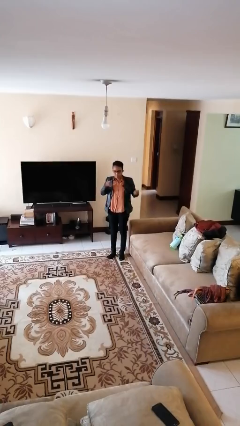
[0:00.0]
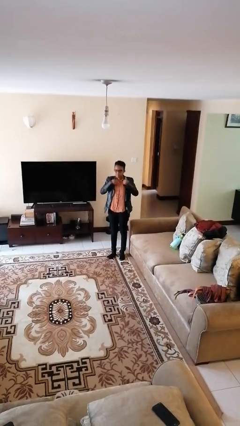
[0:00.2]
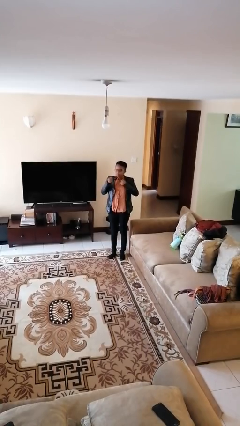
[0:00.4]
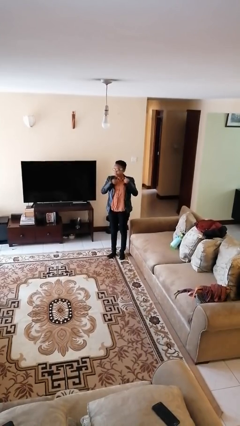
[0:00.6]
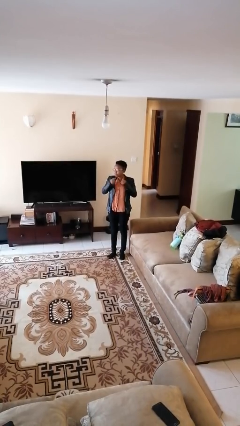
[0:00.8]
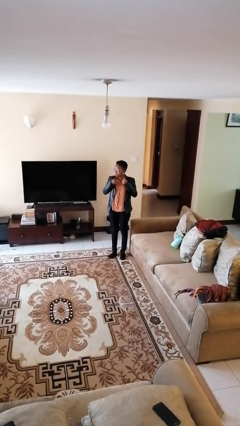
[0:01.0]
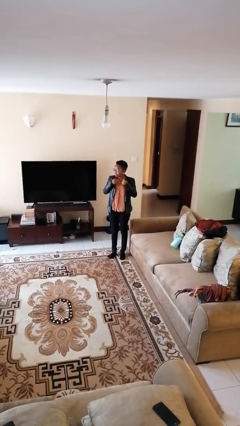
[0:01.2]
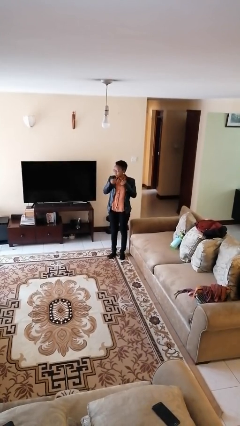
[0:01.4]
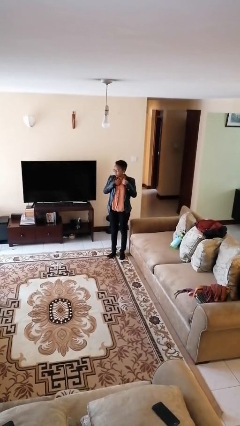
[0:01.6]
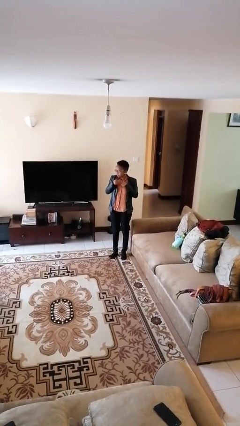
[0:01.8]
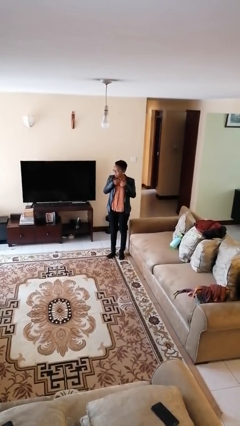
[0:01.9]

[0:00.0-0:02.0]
person drums on chest

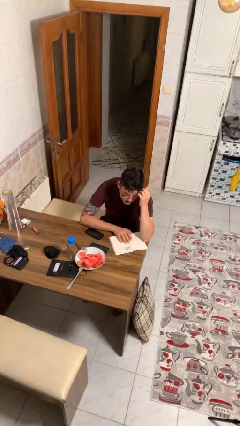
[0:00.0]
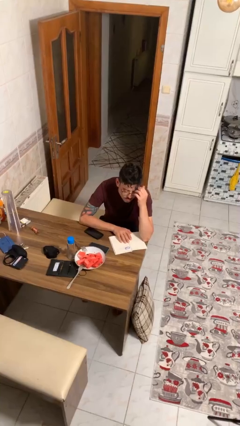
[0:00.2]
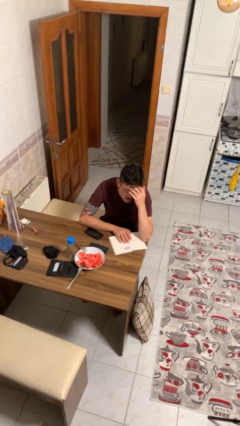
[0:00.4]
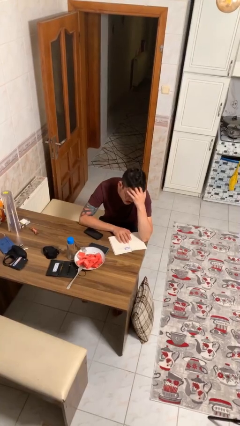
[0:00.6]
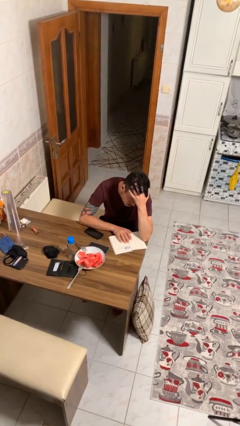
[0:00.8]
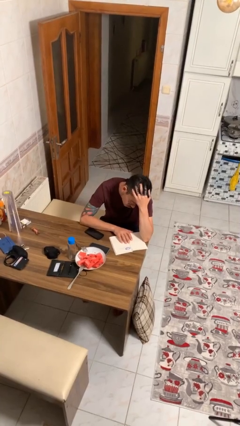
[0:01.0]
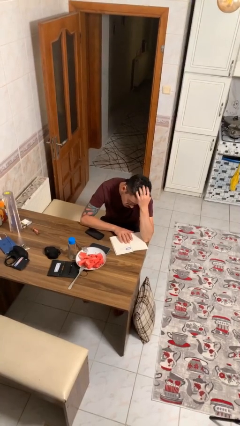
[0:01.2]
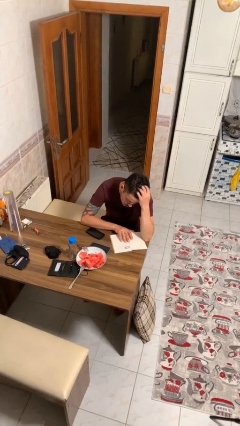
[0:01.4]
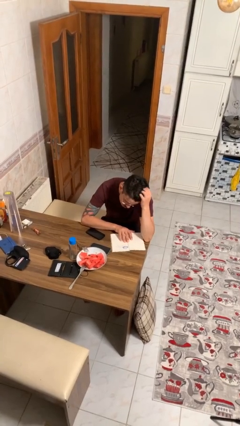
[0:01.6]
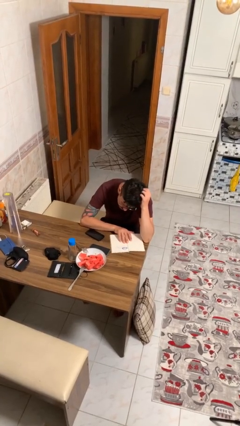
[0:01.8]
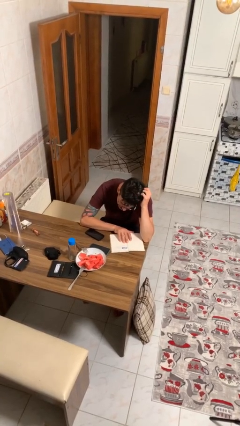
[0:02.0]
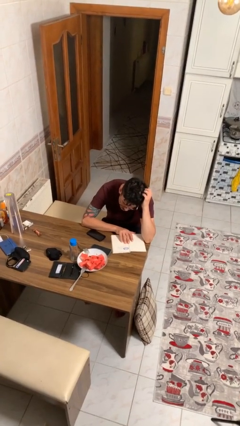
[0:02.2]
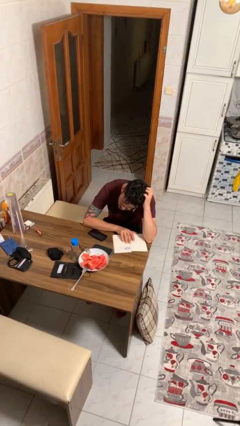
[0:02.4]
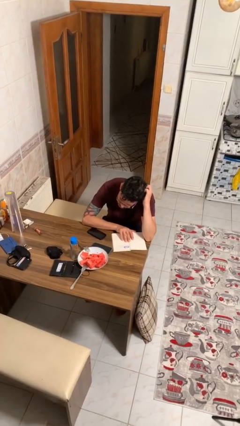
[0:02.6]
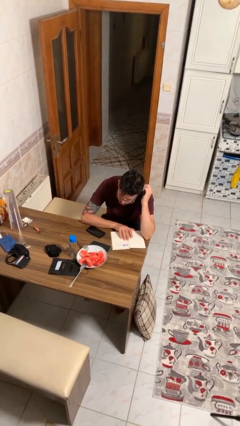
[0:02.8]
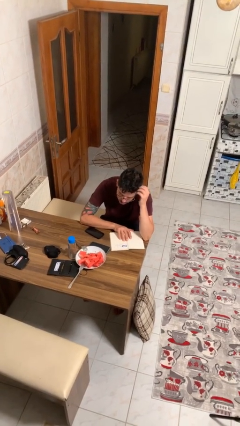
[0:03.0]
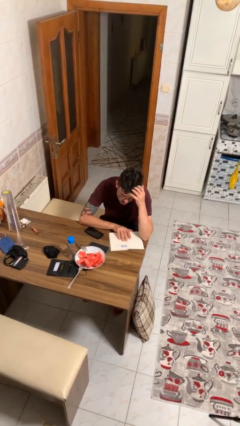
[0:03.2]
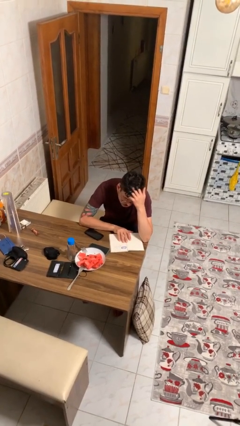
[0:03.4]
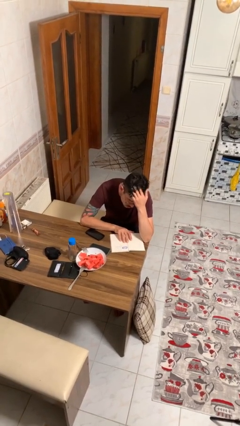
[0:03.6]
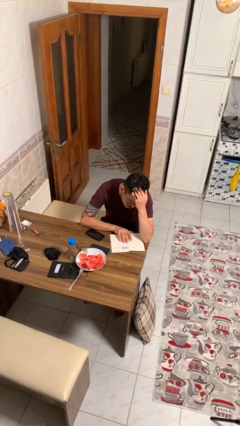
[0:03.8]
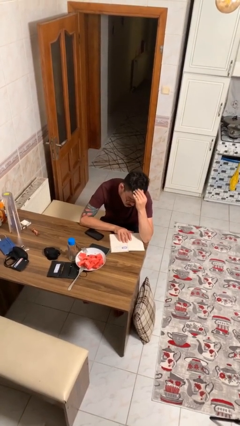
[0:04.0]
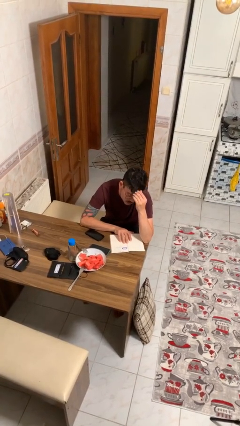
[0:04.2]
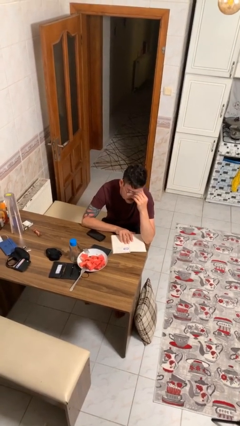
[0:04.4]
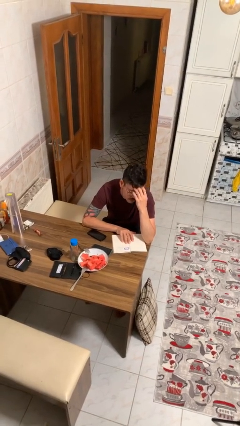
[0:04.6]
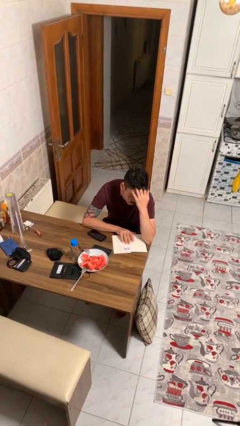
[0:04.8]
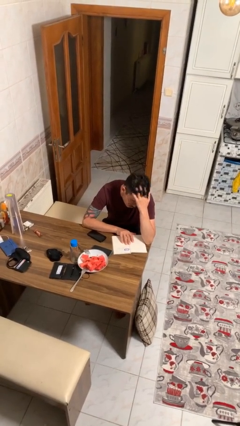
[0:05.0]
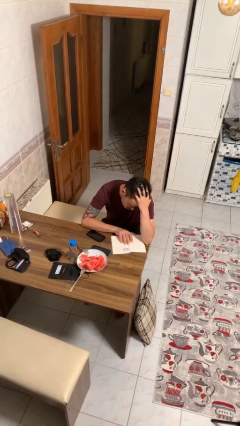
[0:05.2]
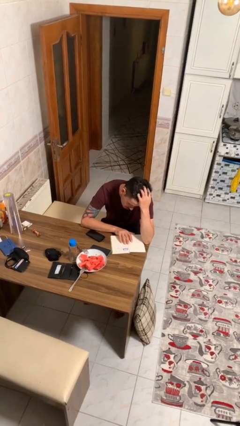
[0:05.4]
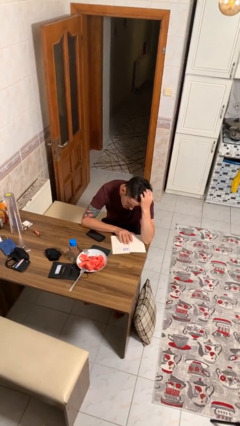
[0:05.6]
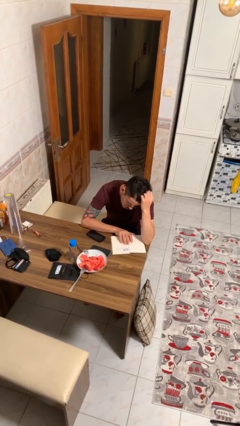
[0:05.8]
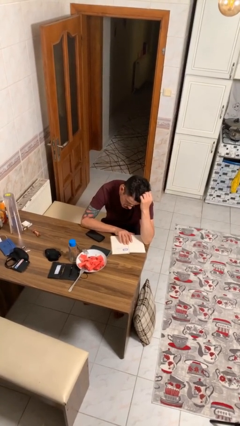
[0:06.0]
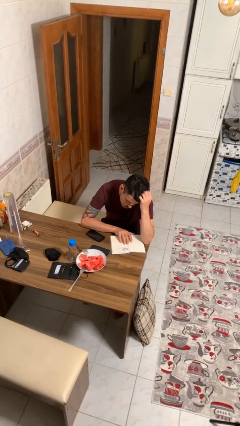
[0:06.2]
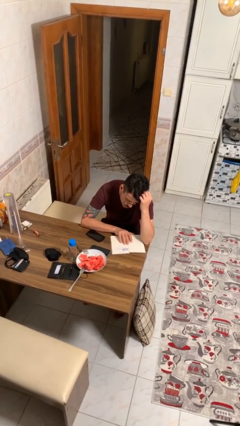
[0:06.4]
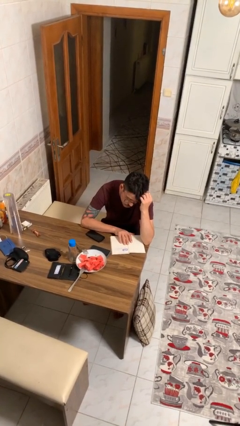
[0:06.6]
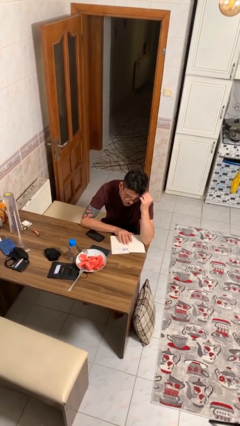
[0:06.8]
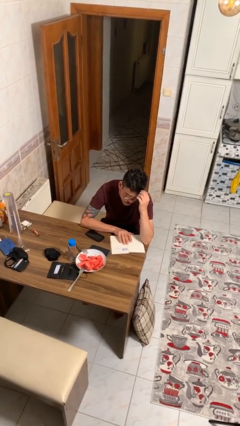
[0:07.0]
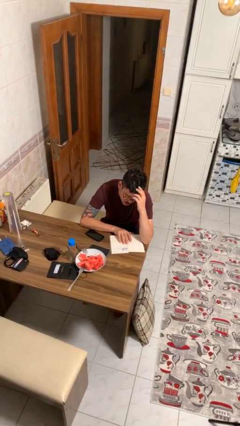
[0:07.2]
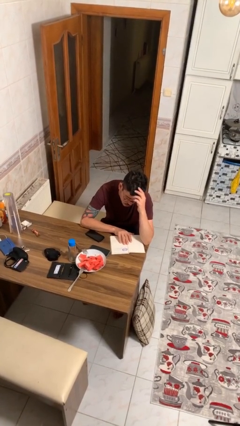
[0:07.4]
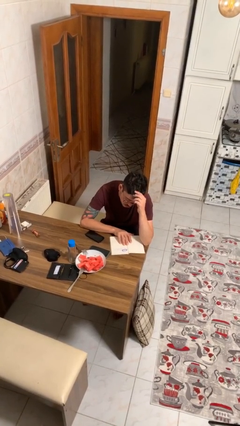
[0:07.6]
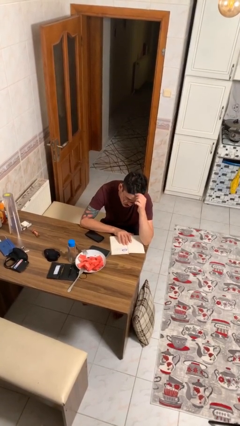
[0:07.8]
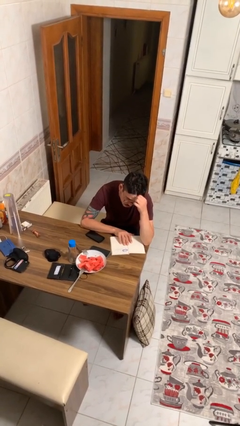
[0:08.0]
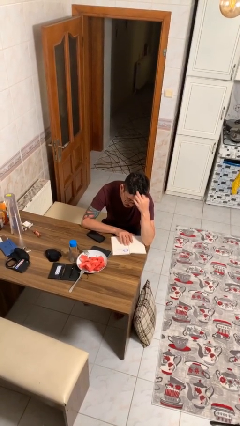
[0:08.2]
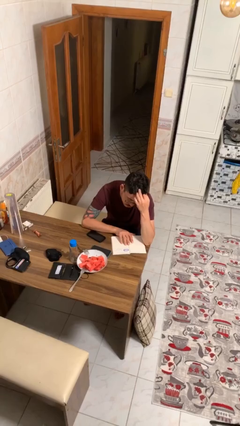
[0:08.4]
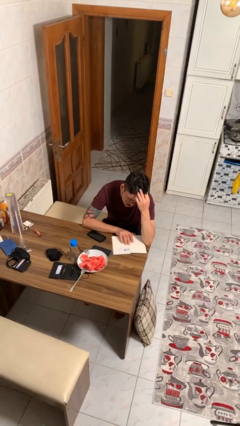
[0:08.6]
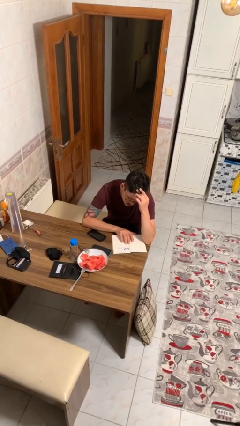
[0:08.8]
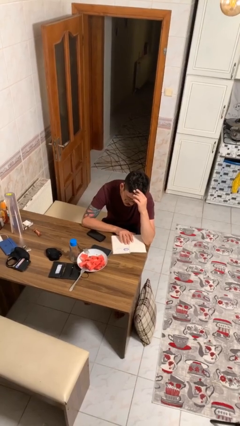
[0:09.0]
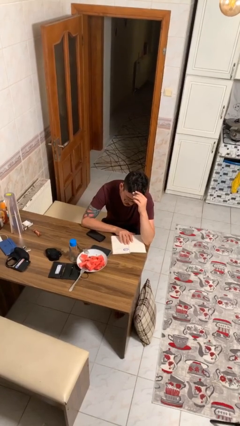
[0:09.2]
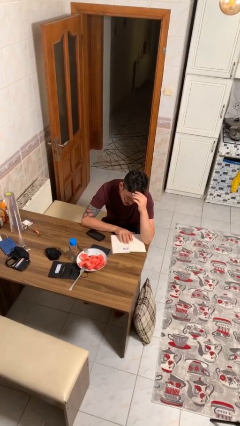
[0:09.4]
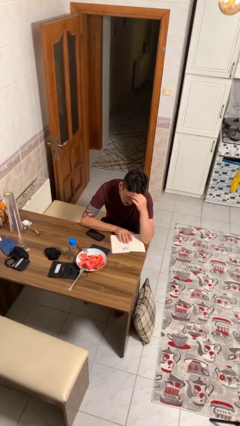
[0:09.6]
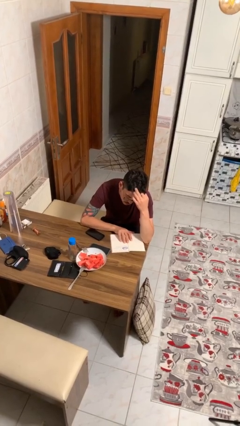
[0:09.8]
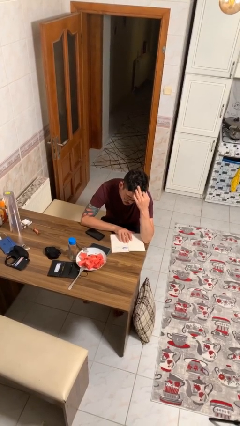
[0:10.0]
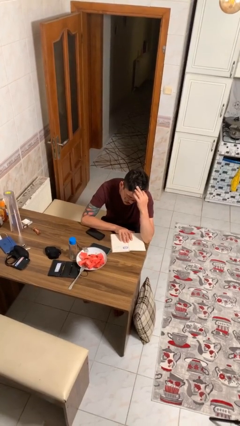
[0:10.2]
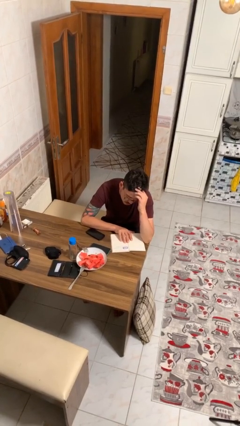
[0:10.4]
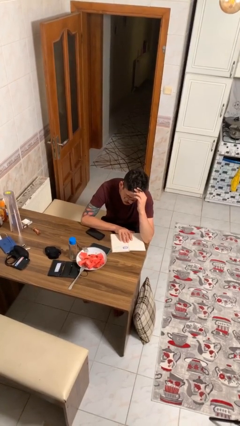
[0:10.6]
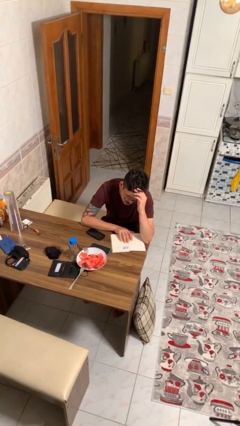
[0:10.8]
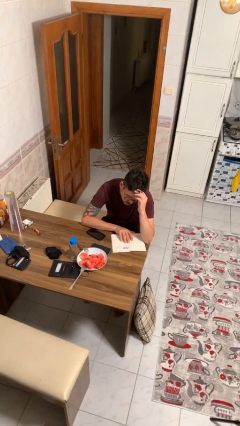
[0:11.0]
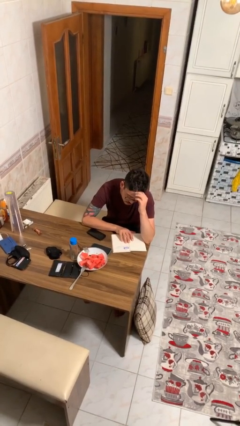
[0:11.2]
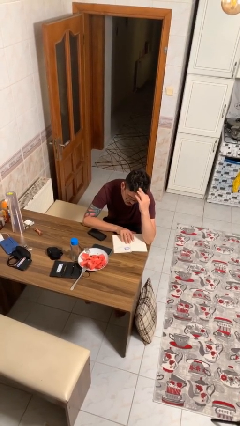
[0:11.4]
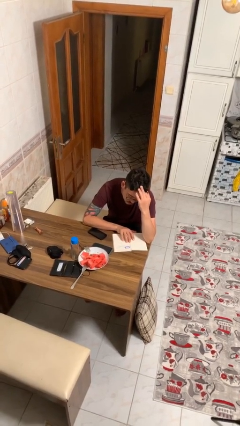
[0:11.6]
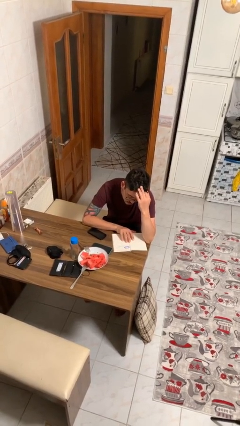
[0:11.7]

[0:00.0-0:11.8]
person reads document

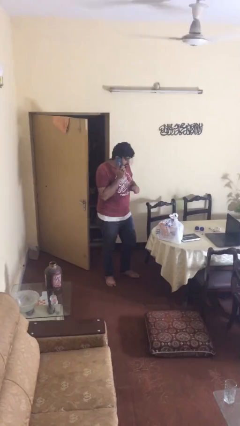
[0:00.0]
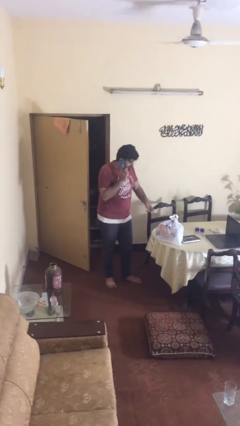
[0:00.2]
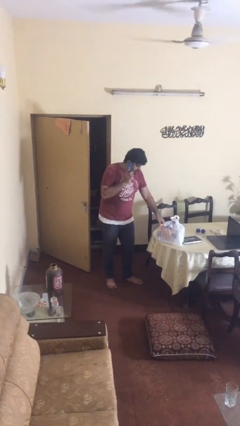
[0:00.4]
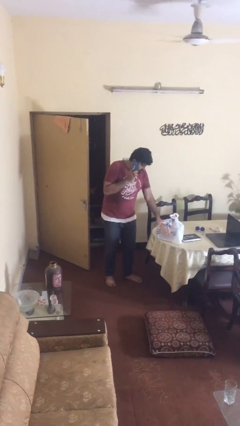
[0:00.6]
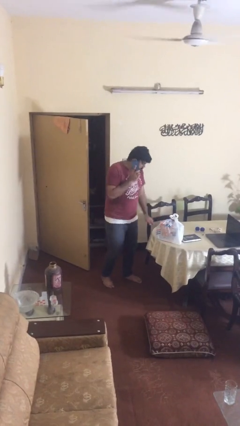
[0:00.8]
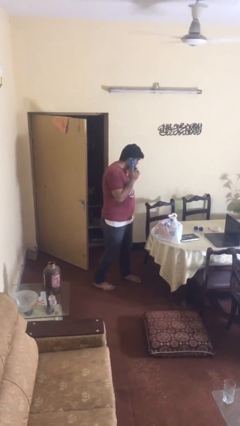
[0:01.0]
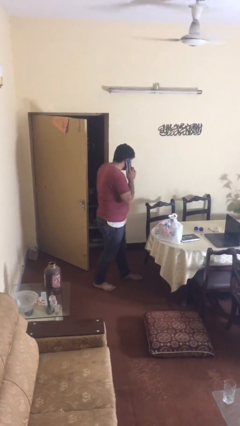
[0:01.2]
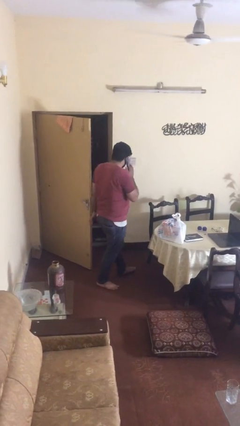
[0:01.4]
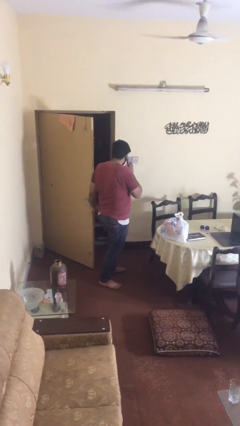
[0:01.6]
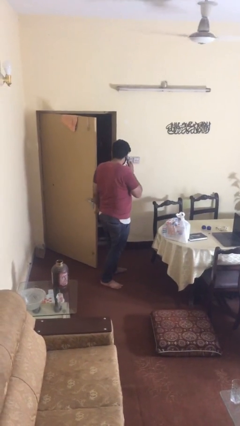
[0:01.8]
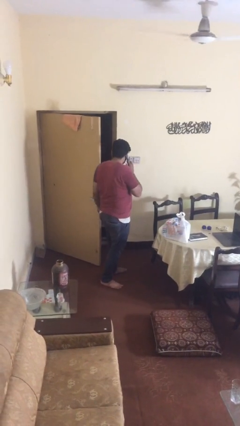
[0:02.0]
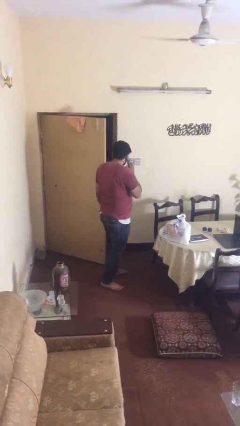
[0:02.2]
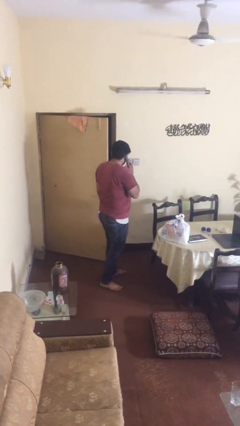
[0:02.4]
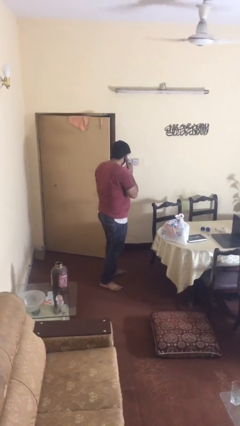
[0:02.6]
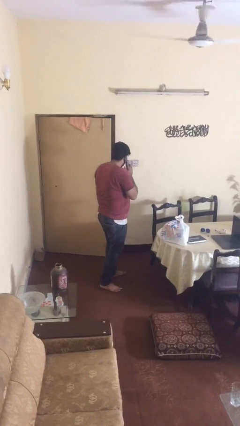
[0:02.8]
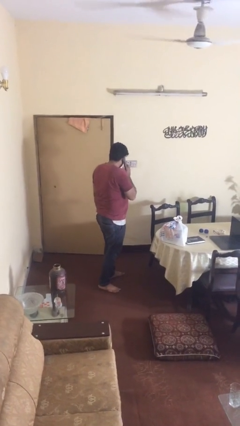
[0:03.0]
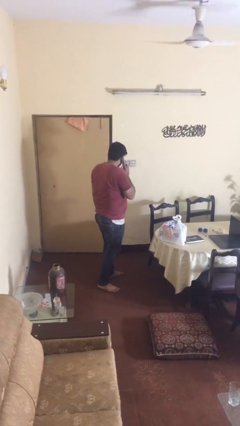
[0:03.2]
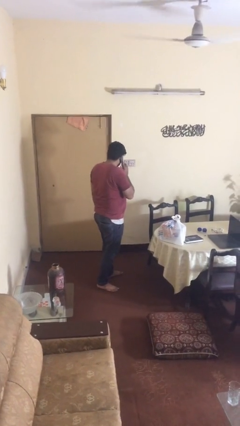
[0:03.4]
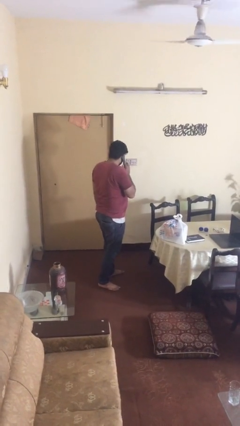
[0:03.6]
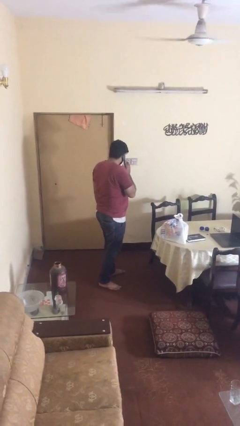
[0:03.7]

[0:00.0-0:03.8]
person closes facility door

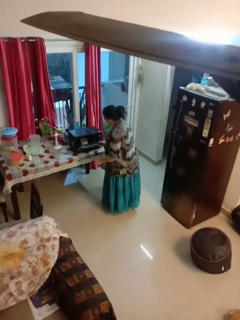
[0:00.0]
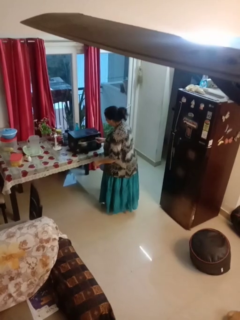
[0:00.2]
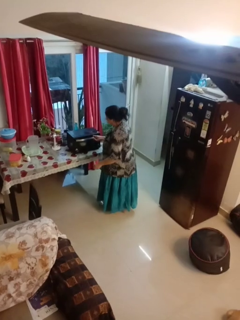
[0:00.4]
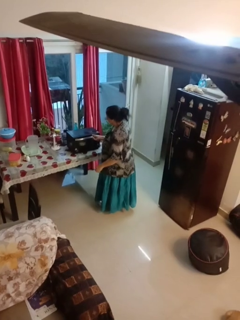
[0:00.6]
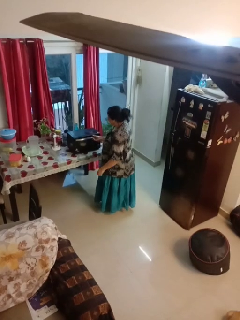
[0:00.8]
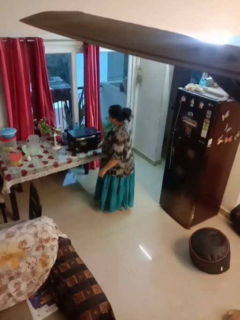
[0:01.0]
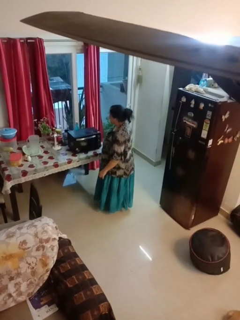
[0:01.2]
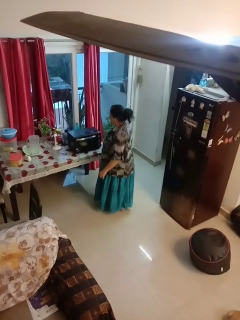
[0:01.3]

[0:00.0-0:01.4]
person closes microwave
